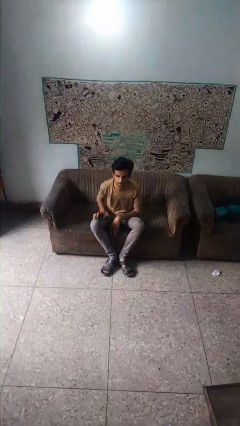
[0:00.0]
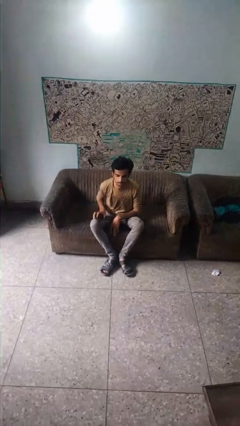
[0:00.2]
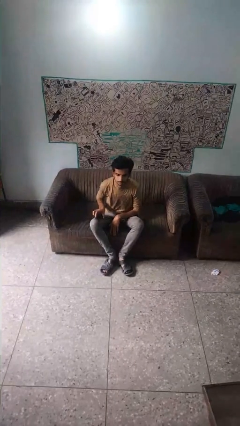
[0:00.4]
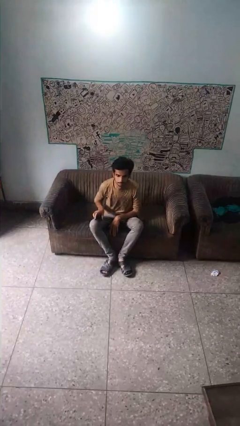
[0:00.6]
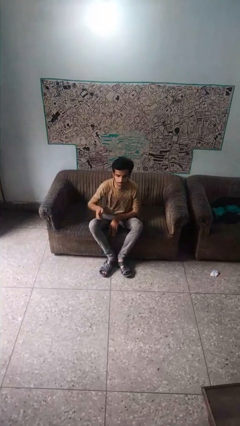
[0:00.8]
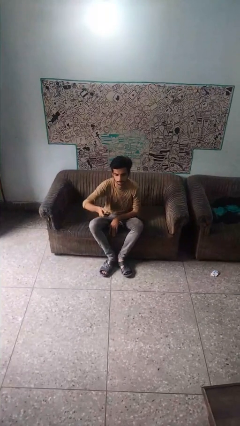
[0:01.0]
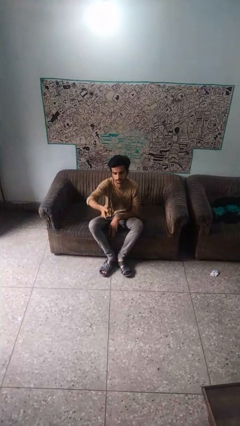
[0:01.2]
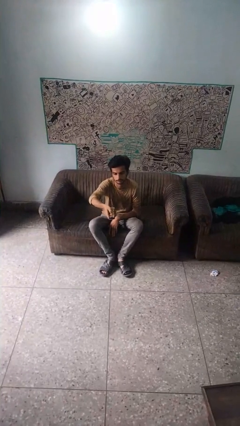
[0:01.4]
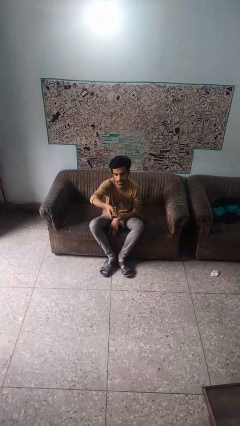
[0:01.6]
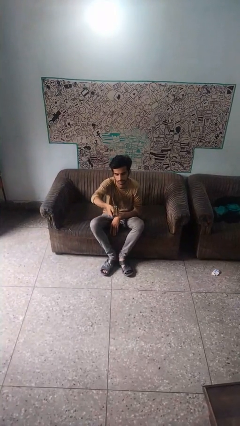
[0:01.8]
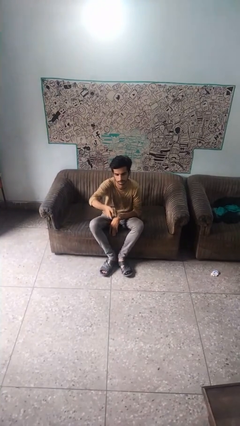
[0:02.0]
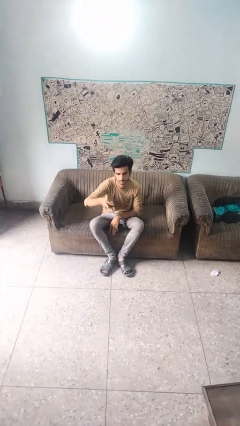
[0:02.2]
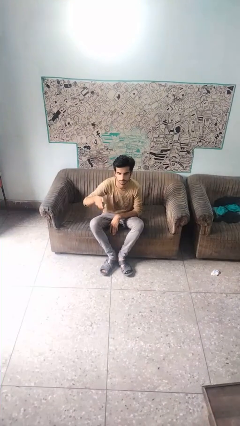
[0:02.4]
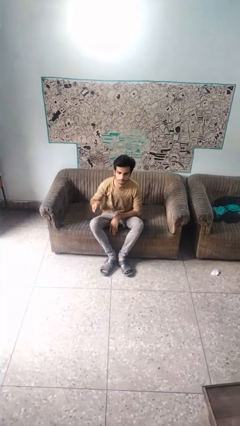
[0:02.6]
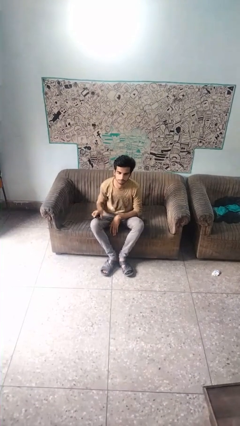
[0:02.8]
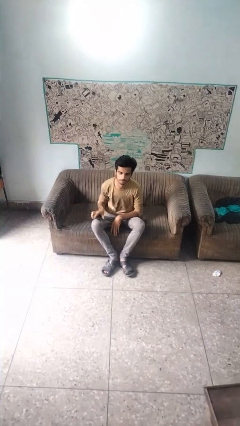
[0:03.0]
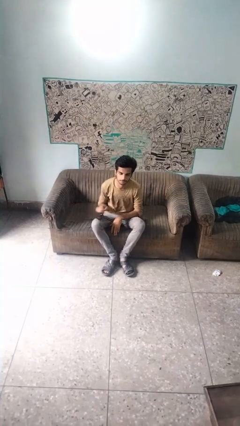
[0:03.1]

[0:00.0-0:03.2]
person uses television remote

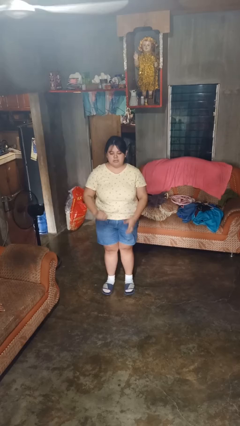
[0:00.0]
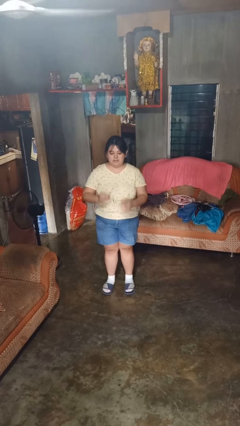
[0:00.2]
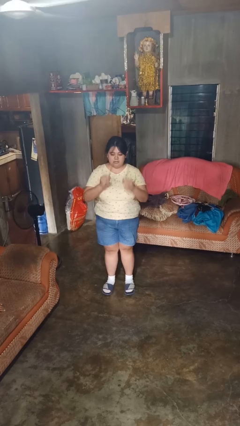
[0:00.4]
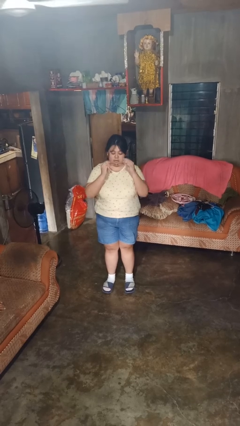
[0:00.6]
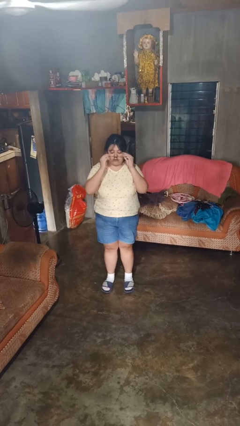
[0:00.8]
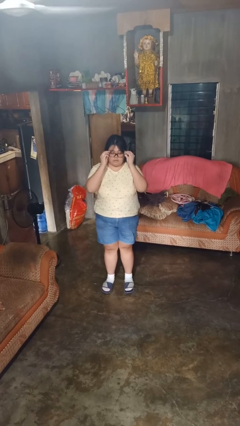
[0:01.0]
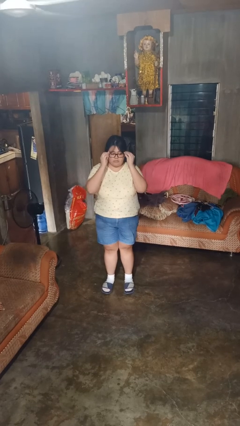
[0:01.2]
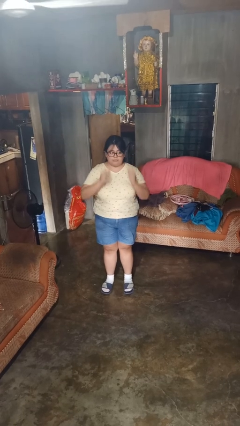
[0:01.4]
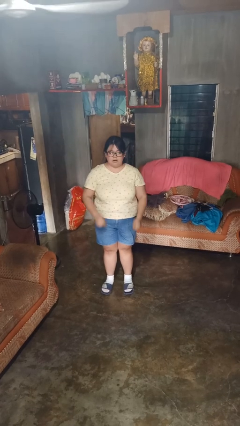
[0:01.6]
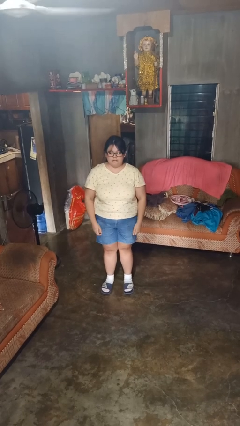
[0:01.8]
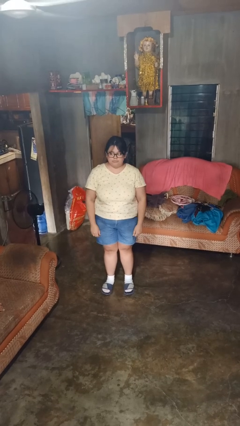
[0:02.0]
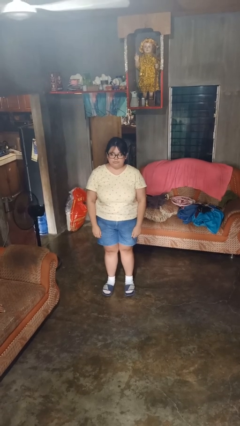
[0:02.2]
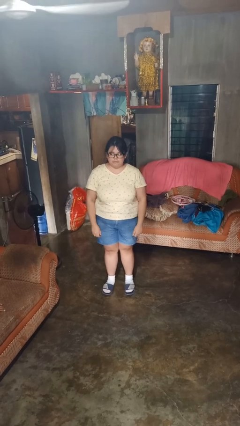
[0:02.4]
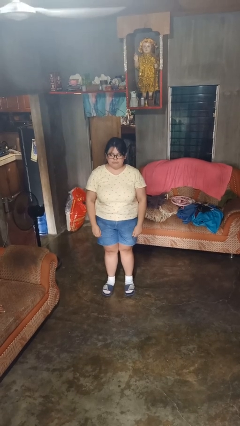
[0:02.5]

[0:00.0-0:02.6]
person puts on glasses

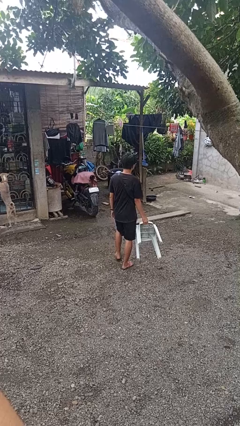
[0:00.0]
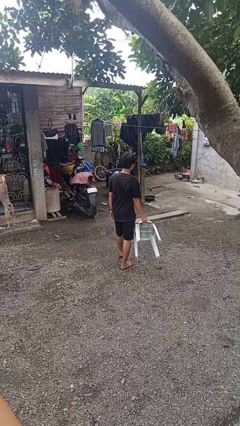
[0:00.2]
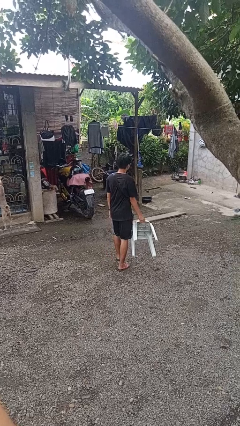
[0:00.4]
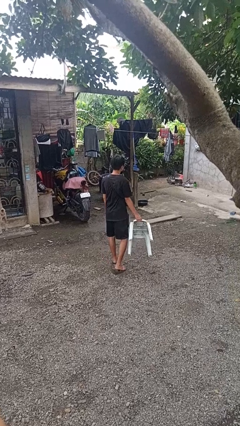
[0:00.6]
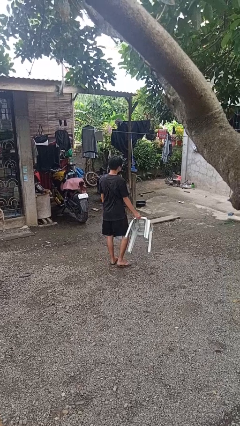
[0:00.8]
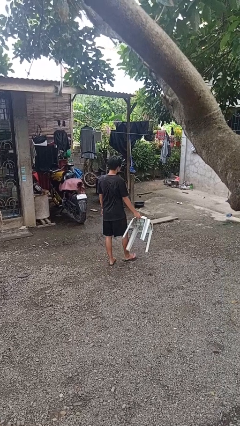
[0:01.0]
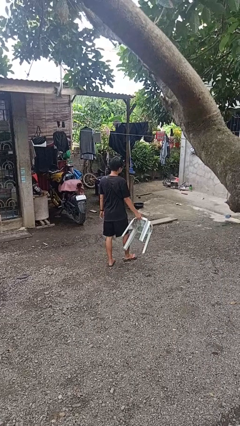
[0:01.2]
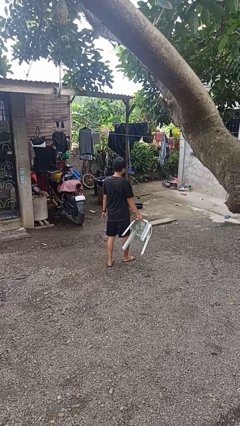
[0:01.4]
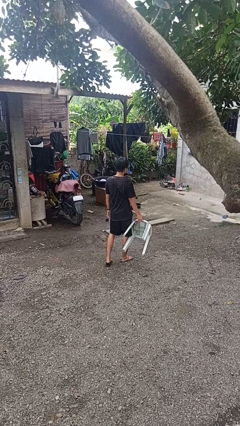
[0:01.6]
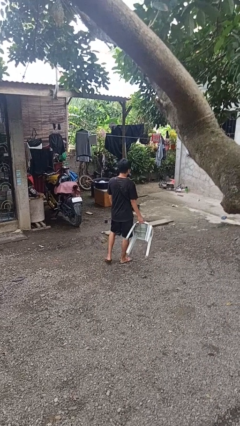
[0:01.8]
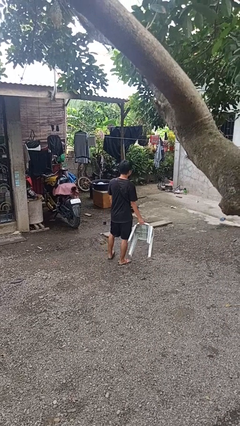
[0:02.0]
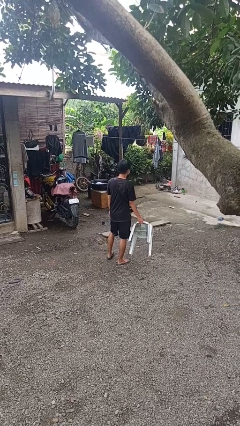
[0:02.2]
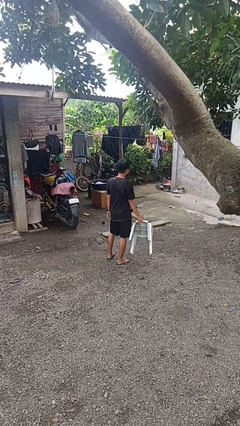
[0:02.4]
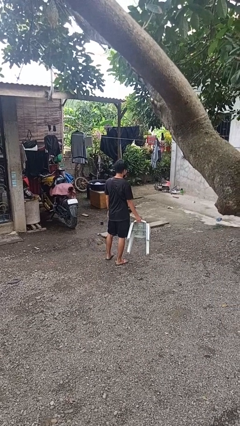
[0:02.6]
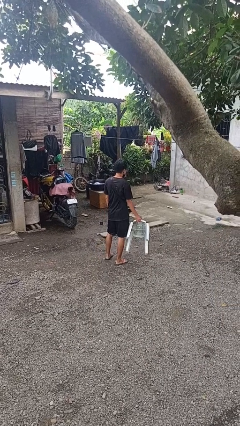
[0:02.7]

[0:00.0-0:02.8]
person carries furniture

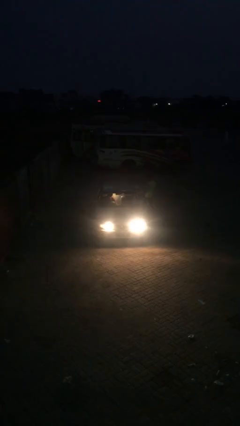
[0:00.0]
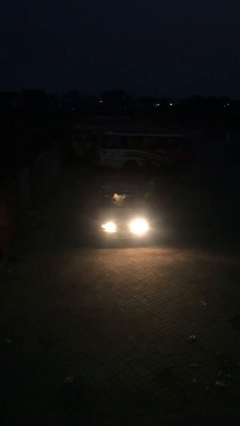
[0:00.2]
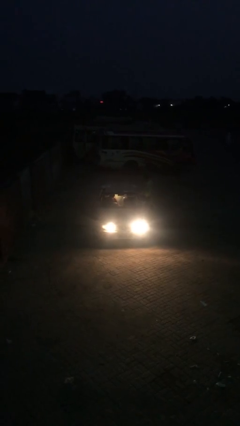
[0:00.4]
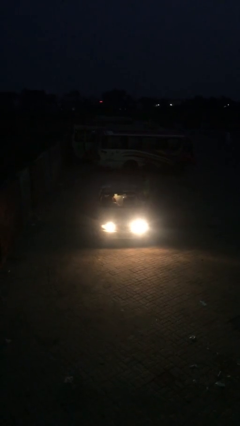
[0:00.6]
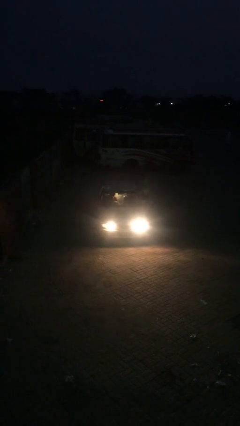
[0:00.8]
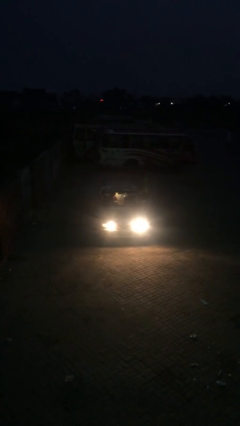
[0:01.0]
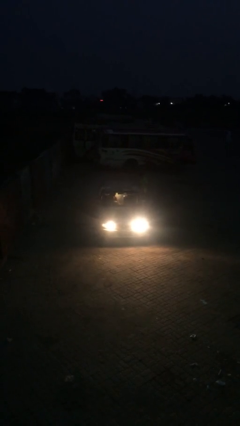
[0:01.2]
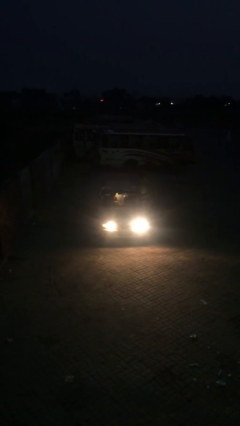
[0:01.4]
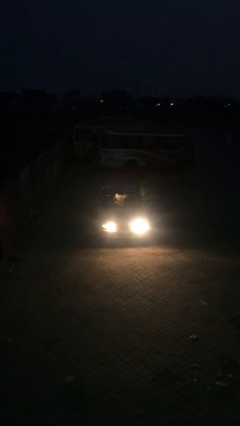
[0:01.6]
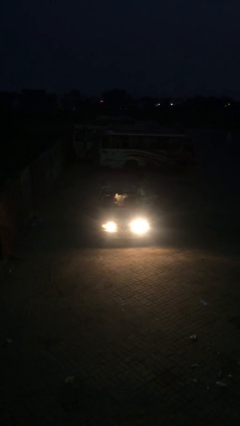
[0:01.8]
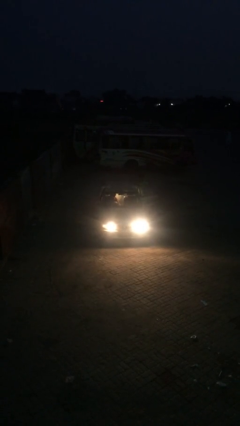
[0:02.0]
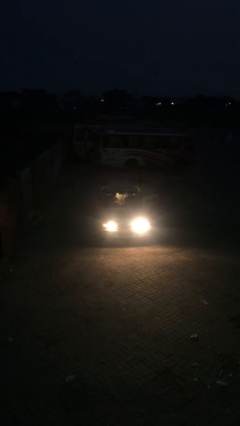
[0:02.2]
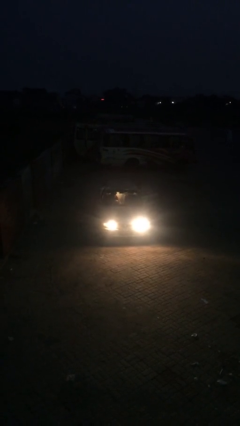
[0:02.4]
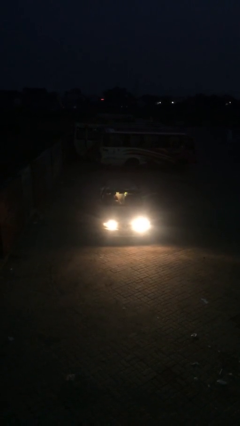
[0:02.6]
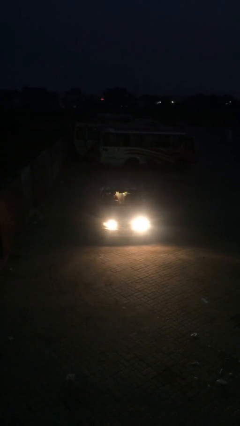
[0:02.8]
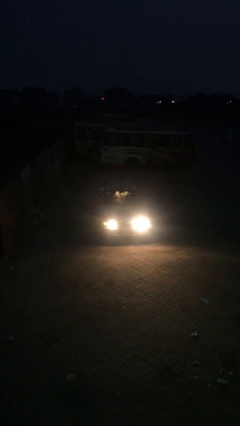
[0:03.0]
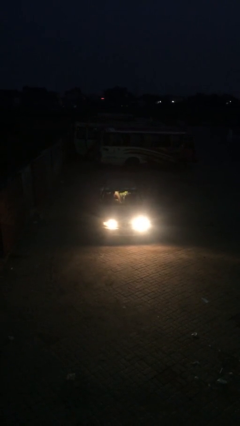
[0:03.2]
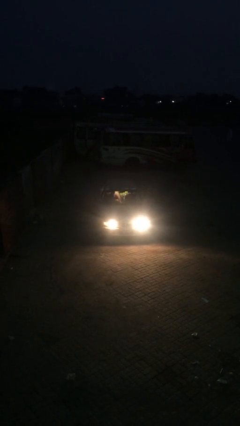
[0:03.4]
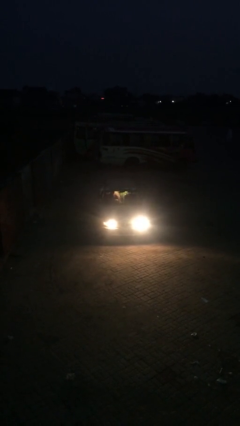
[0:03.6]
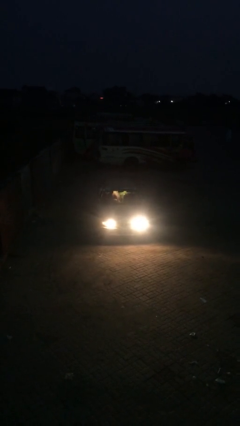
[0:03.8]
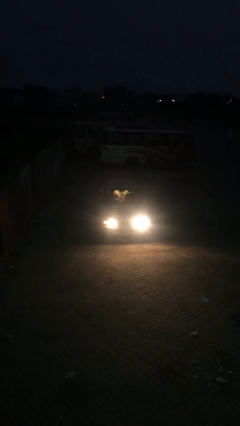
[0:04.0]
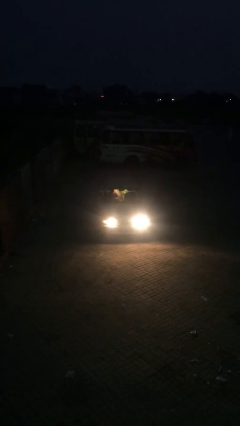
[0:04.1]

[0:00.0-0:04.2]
car picks up person

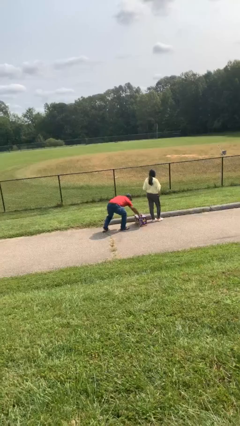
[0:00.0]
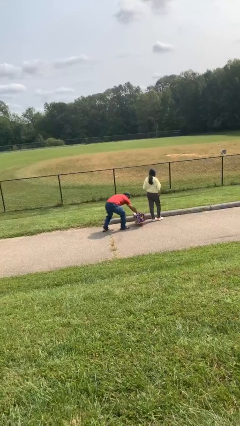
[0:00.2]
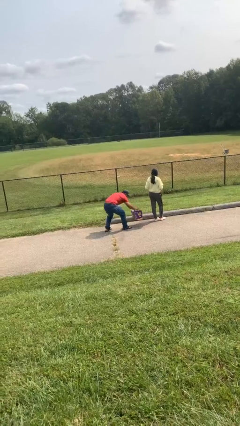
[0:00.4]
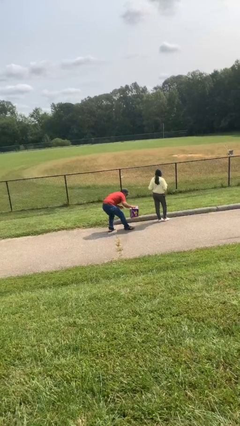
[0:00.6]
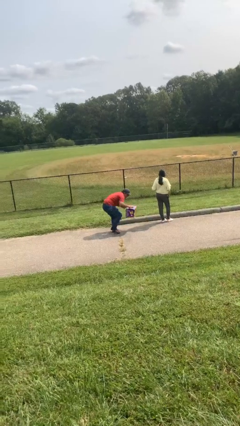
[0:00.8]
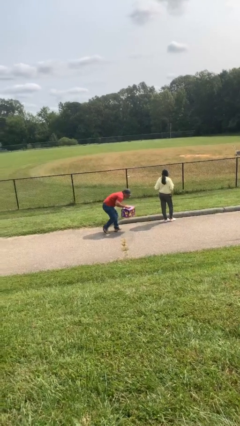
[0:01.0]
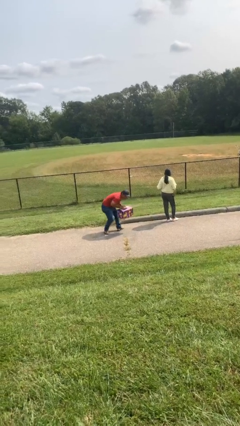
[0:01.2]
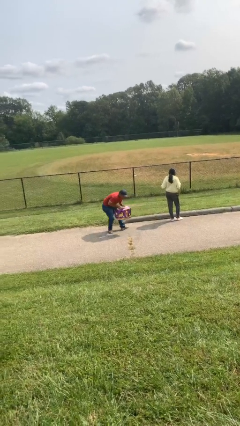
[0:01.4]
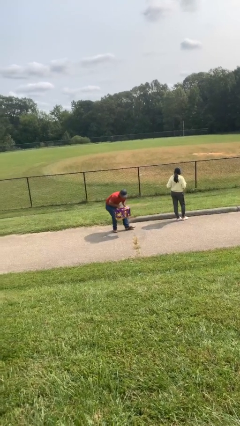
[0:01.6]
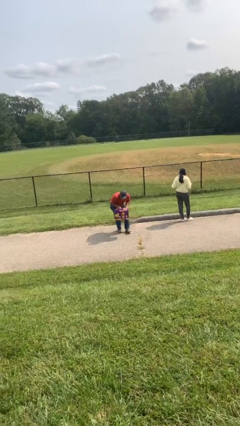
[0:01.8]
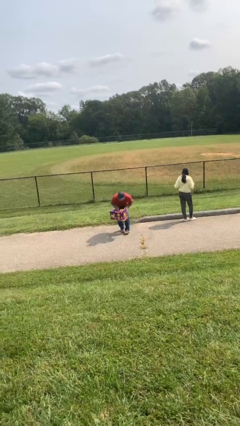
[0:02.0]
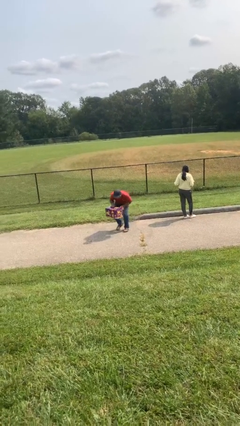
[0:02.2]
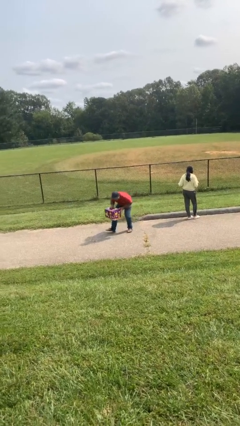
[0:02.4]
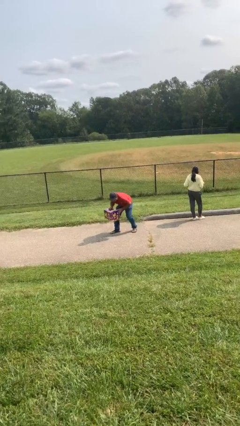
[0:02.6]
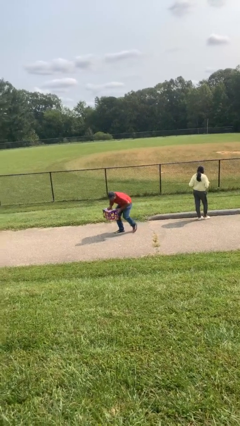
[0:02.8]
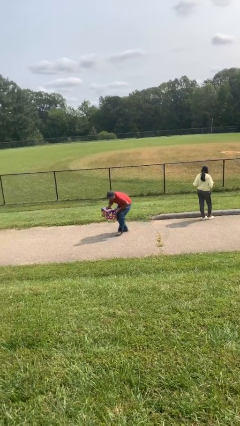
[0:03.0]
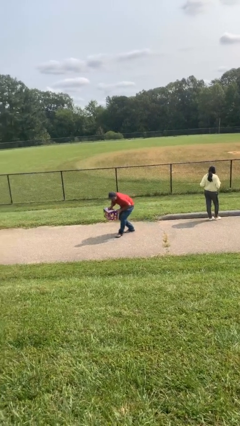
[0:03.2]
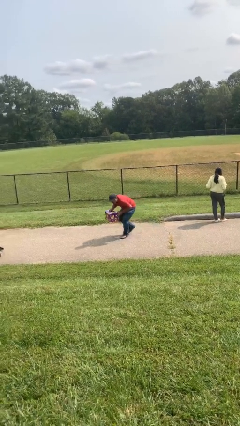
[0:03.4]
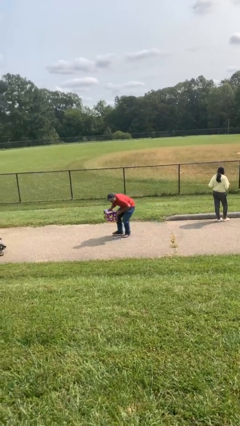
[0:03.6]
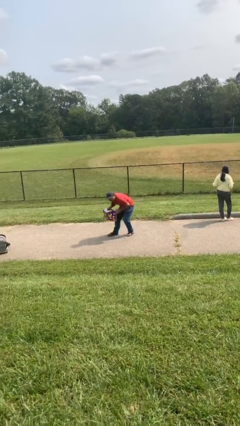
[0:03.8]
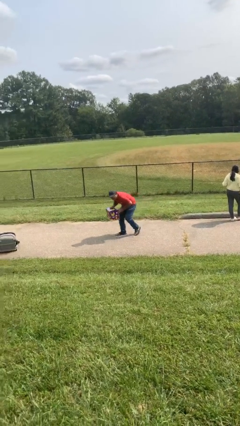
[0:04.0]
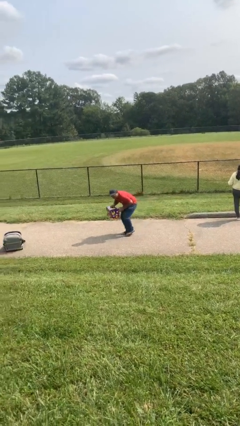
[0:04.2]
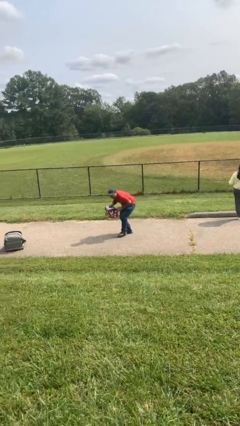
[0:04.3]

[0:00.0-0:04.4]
person steals object from person

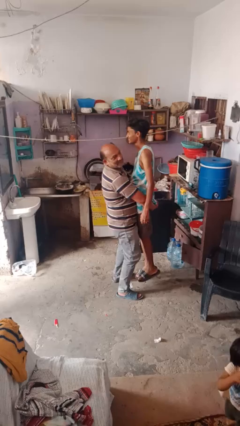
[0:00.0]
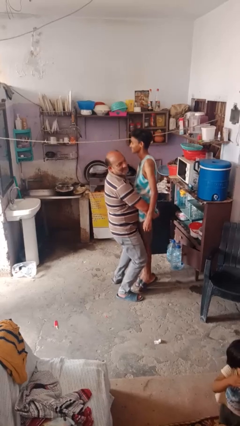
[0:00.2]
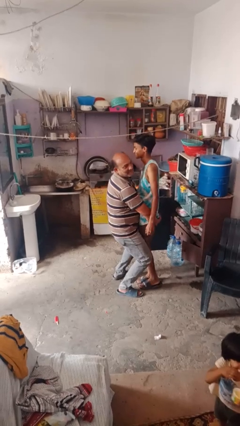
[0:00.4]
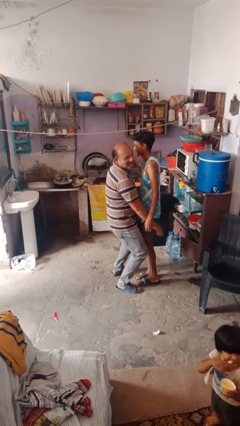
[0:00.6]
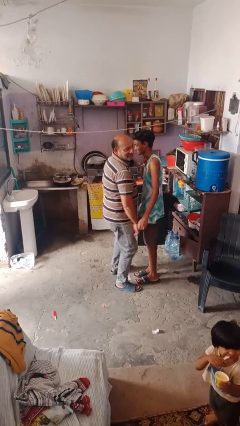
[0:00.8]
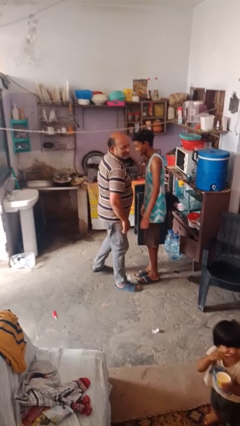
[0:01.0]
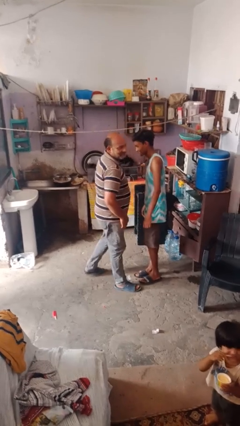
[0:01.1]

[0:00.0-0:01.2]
person puts down person
